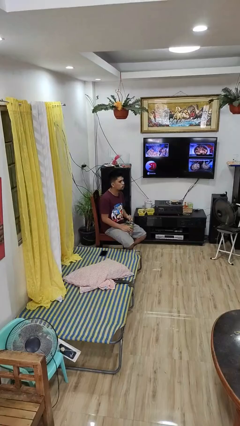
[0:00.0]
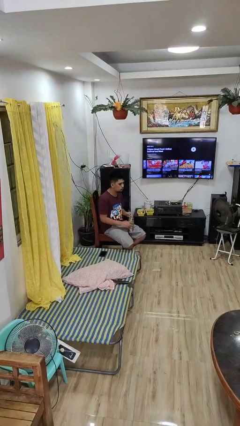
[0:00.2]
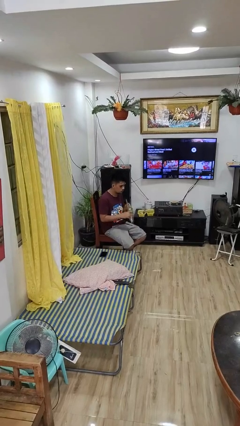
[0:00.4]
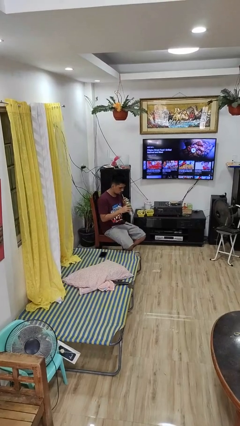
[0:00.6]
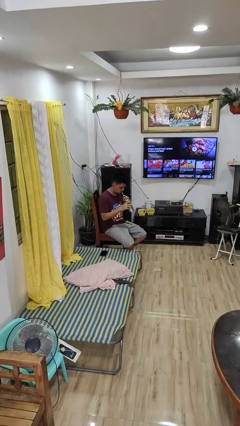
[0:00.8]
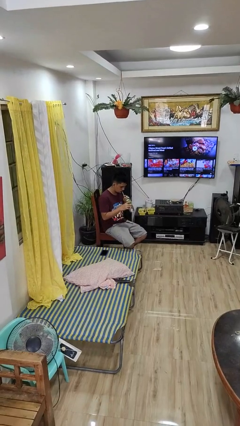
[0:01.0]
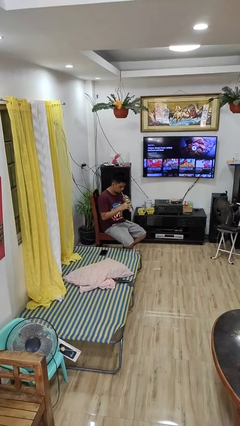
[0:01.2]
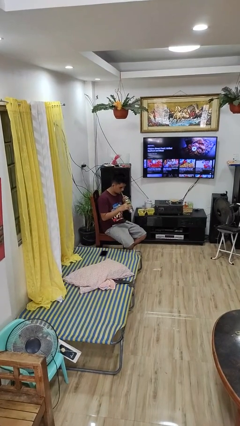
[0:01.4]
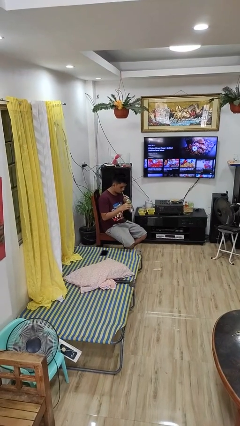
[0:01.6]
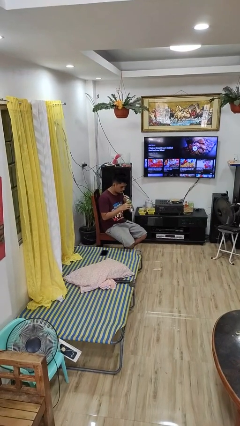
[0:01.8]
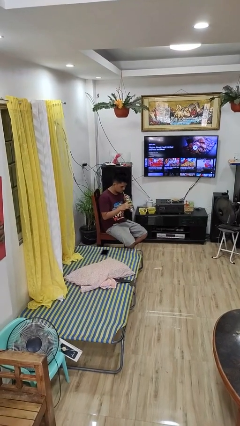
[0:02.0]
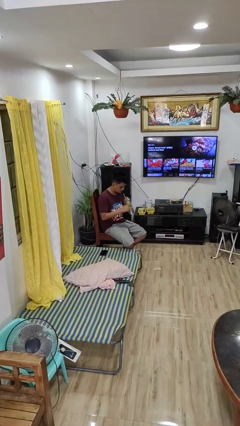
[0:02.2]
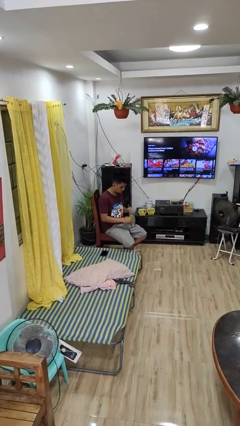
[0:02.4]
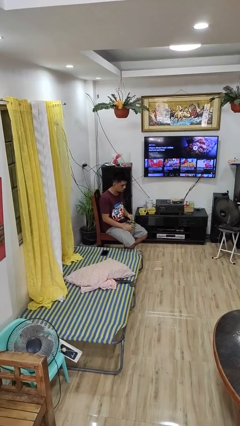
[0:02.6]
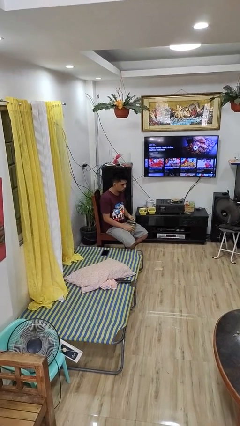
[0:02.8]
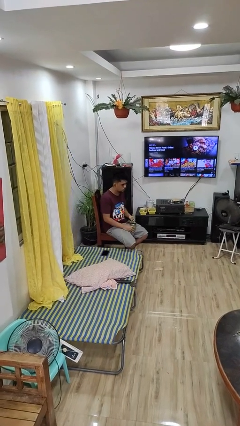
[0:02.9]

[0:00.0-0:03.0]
person drinks from straw

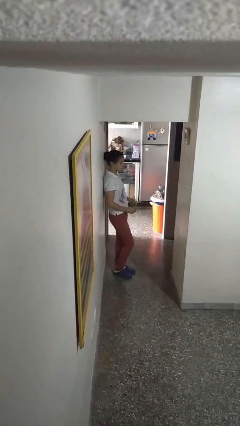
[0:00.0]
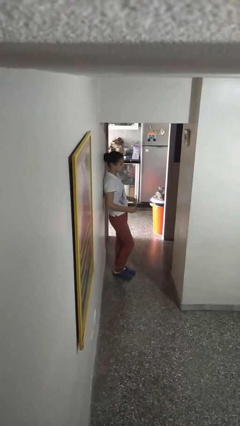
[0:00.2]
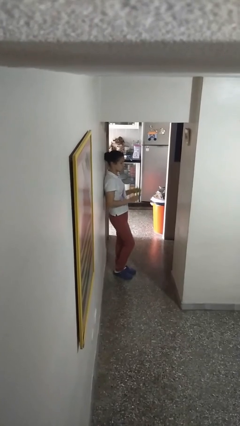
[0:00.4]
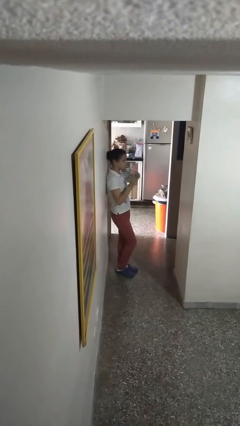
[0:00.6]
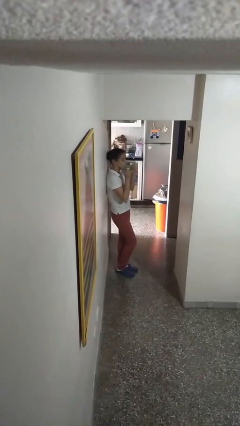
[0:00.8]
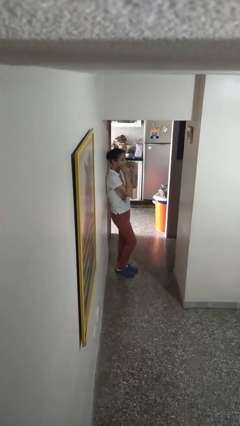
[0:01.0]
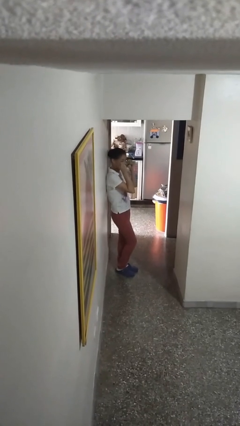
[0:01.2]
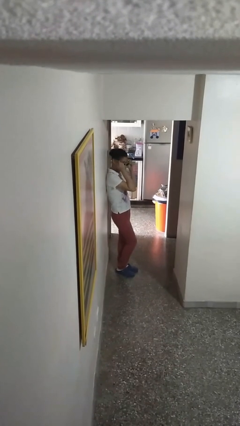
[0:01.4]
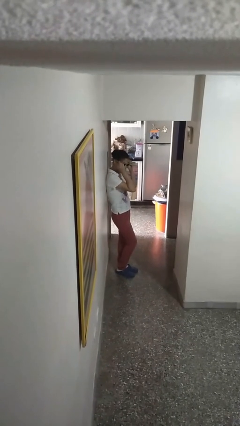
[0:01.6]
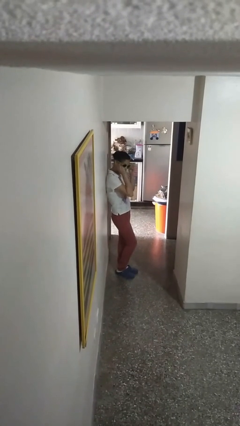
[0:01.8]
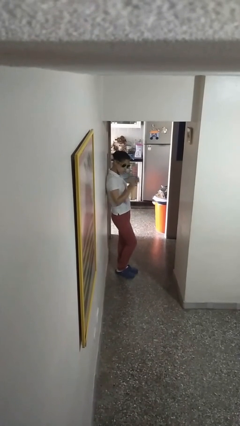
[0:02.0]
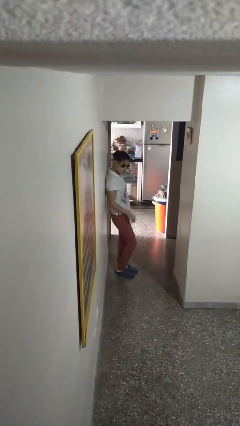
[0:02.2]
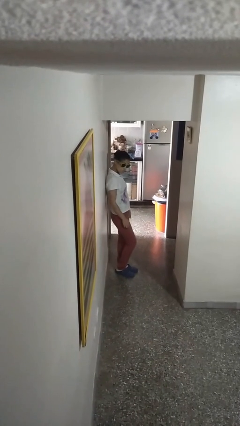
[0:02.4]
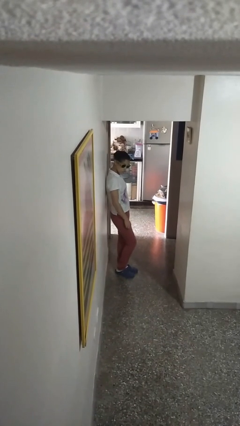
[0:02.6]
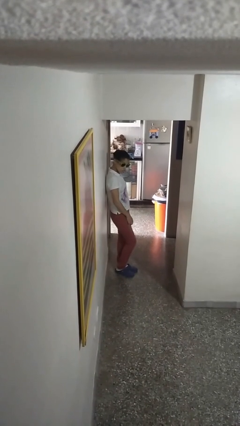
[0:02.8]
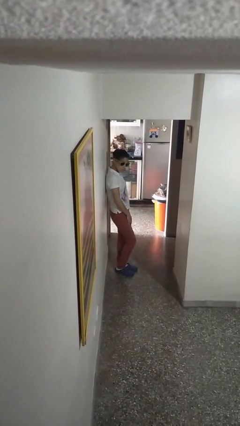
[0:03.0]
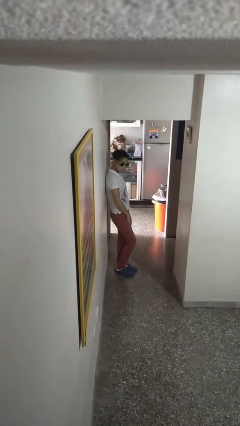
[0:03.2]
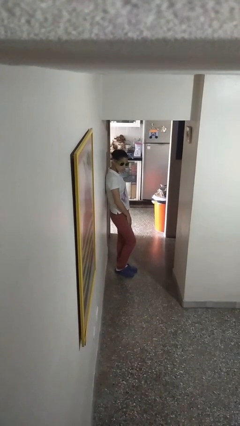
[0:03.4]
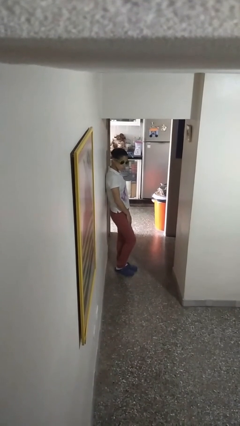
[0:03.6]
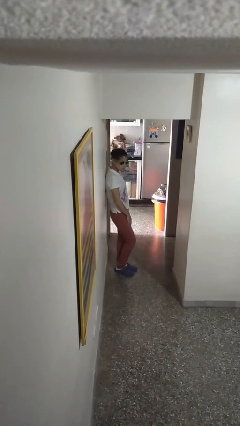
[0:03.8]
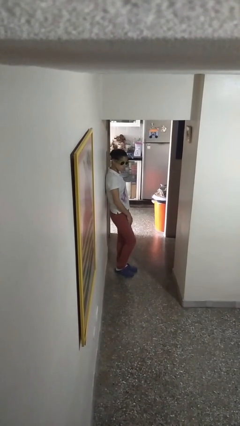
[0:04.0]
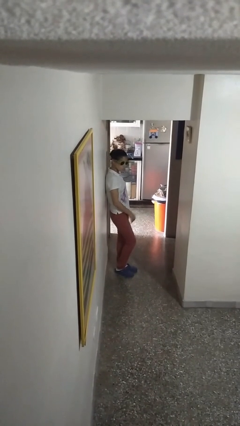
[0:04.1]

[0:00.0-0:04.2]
person puts on sunglasses

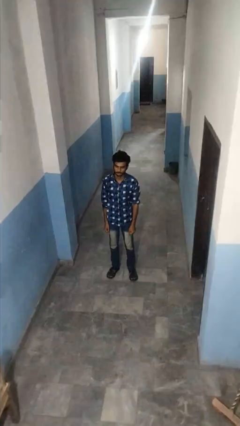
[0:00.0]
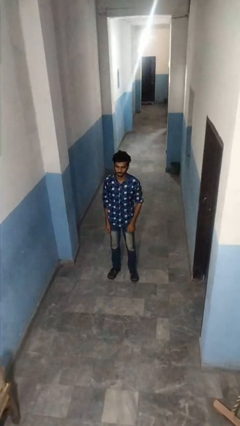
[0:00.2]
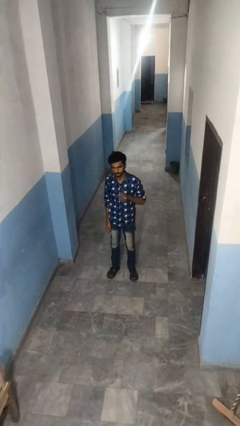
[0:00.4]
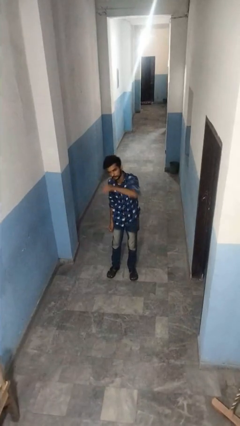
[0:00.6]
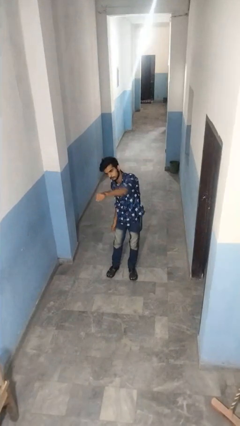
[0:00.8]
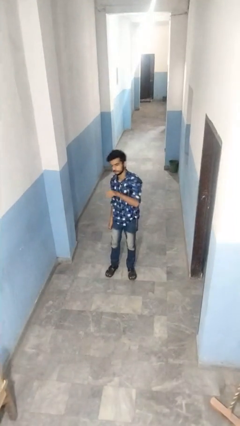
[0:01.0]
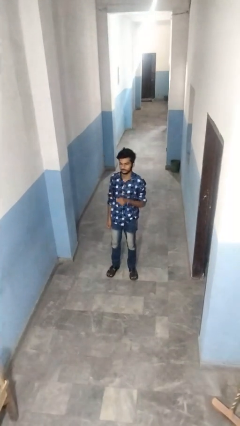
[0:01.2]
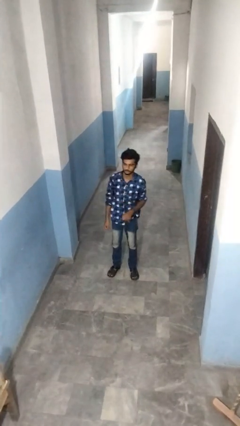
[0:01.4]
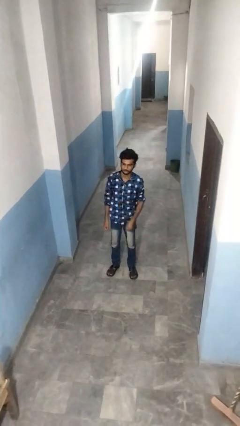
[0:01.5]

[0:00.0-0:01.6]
person punches

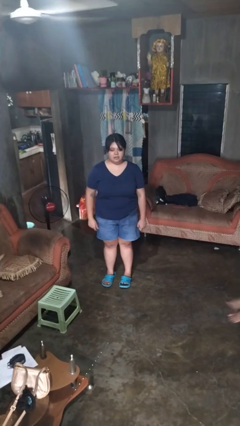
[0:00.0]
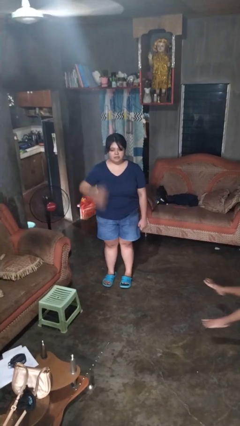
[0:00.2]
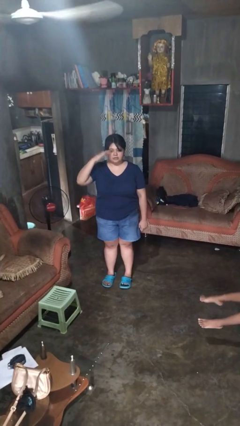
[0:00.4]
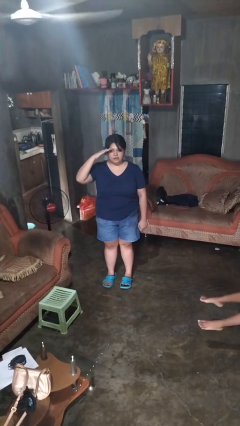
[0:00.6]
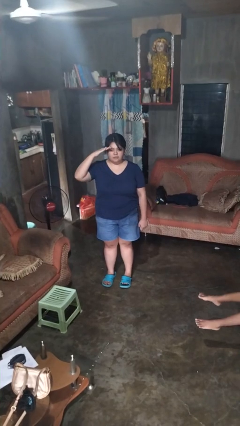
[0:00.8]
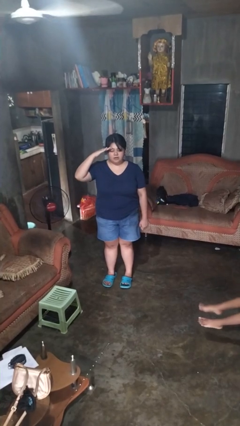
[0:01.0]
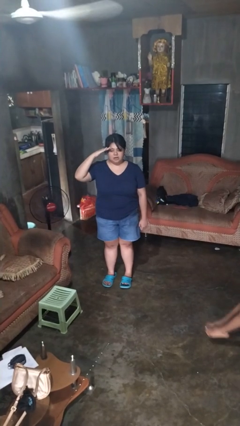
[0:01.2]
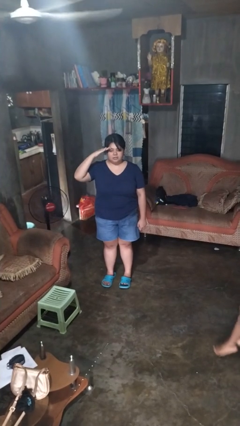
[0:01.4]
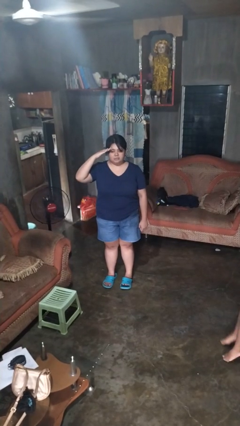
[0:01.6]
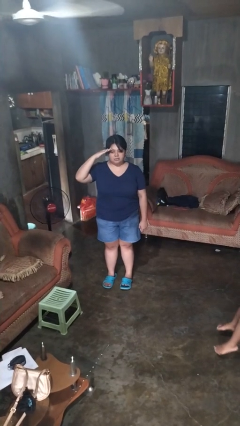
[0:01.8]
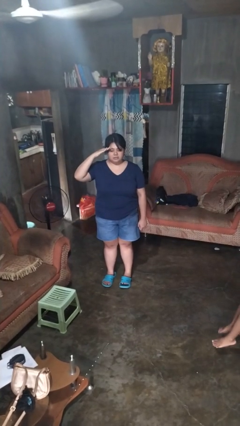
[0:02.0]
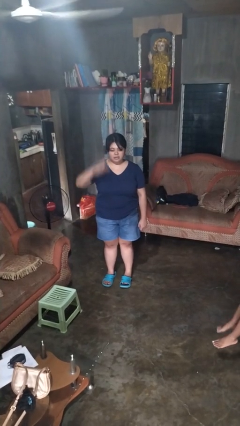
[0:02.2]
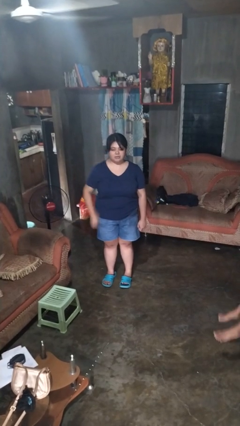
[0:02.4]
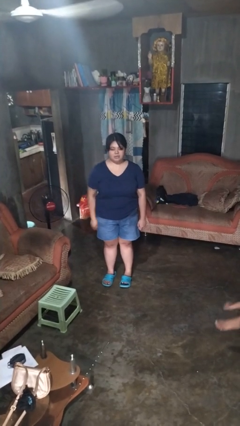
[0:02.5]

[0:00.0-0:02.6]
person salutes

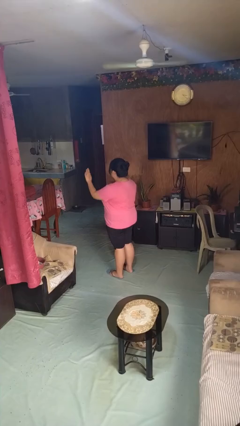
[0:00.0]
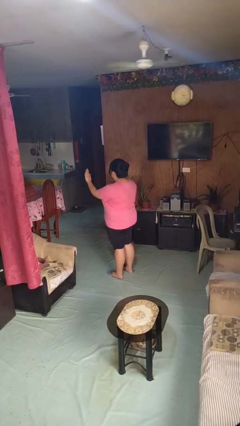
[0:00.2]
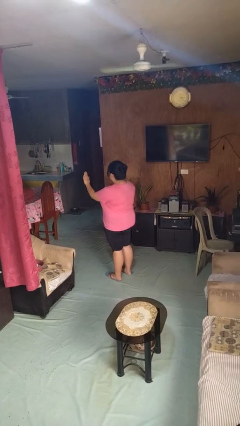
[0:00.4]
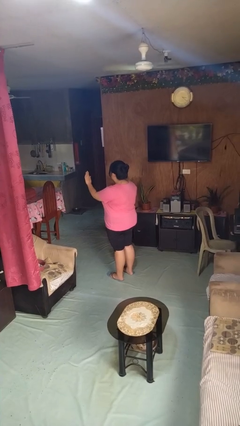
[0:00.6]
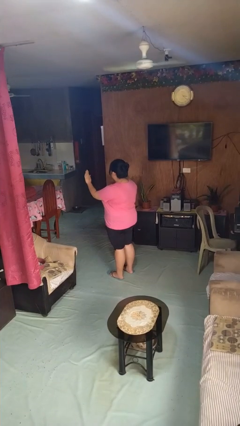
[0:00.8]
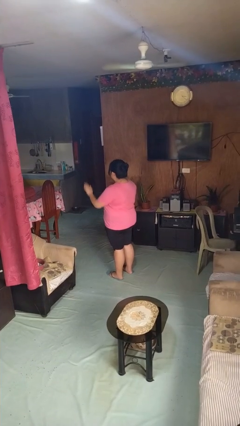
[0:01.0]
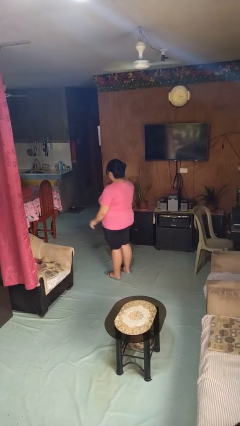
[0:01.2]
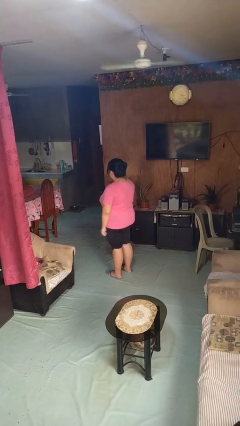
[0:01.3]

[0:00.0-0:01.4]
person gestures stop

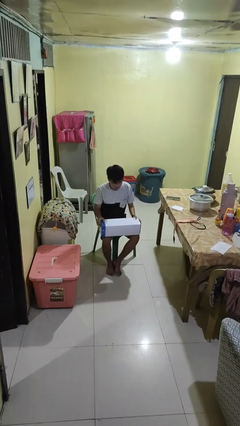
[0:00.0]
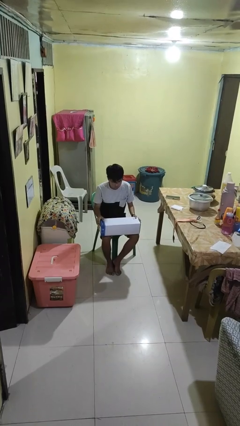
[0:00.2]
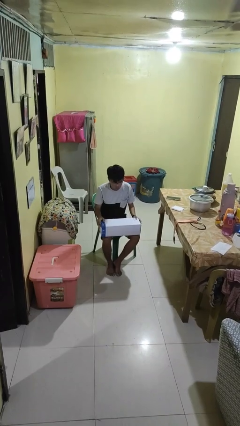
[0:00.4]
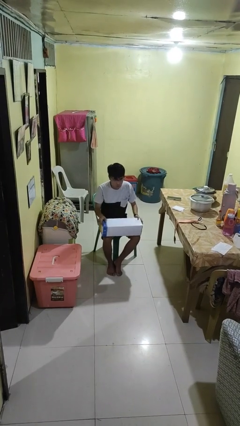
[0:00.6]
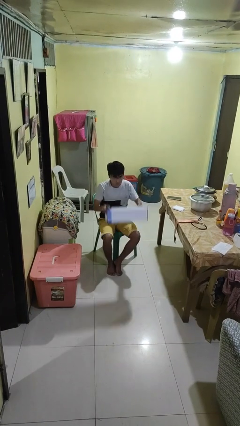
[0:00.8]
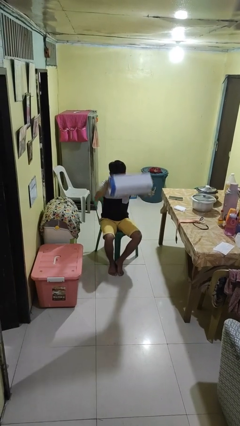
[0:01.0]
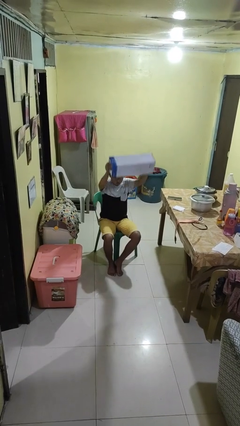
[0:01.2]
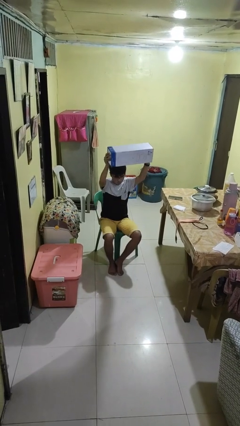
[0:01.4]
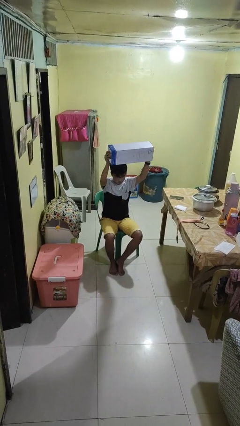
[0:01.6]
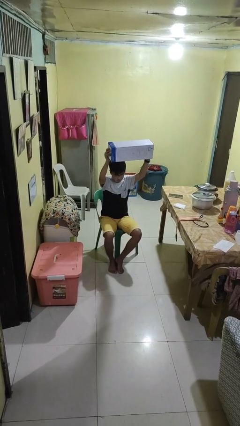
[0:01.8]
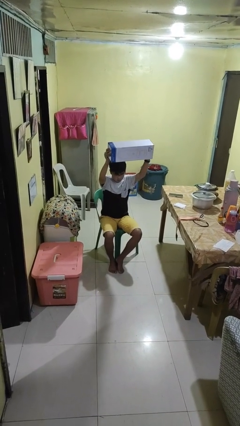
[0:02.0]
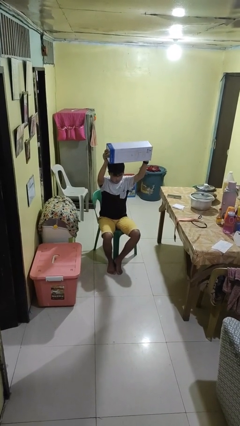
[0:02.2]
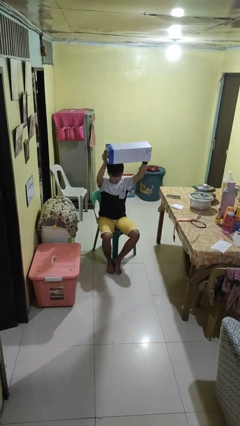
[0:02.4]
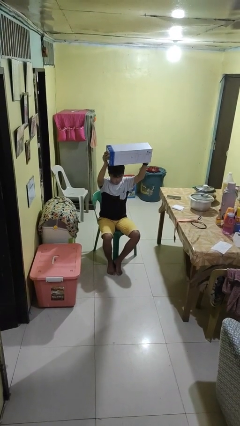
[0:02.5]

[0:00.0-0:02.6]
person holds object above head

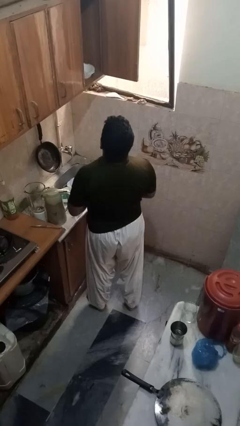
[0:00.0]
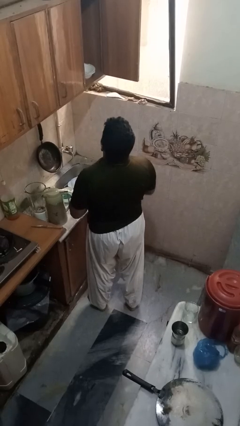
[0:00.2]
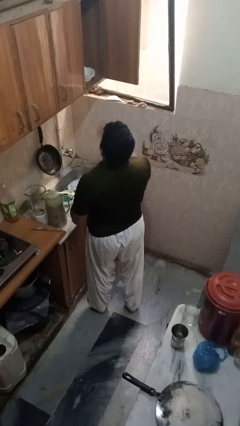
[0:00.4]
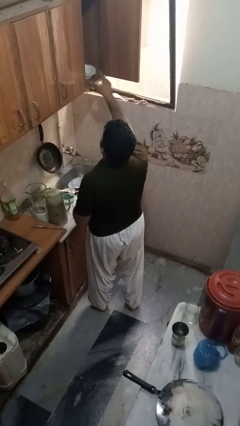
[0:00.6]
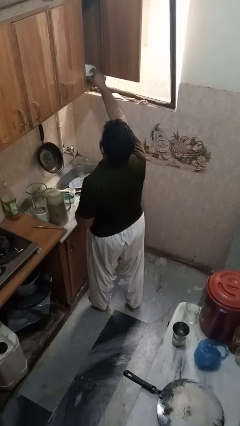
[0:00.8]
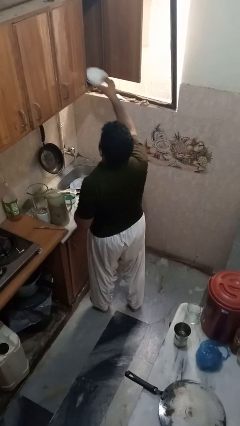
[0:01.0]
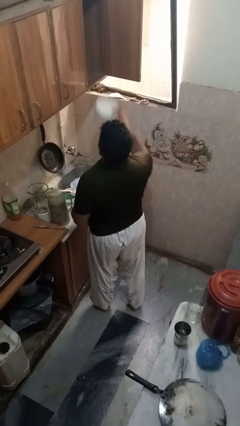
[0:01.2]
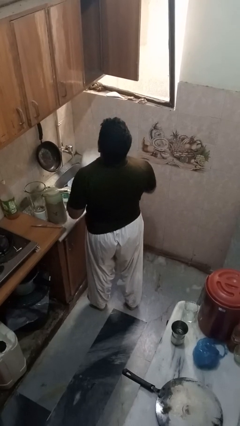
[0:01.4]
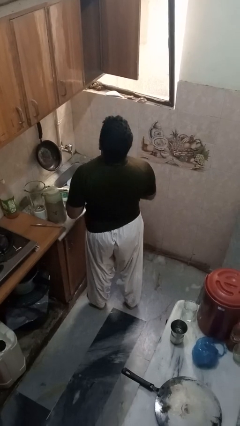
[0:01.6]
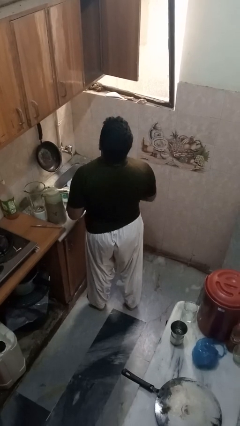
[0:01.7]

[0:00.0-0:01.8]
person takes object from cabinet
